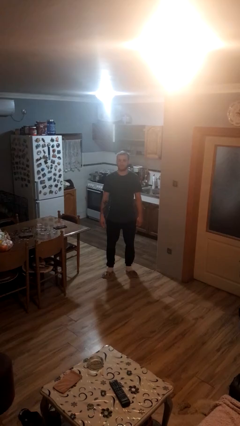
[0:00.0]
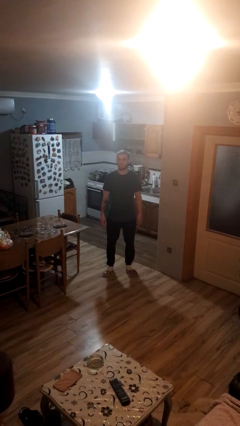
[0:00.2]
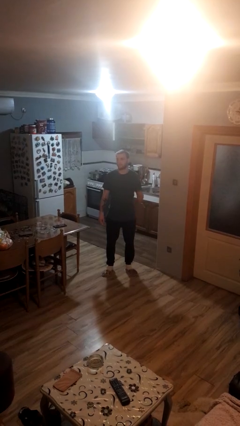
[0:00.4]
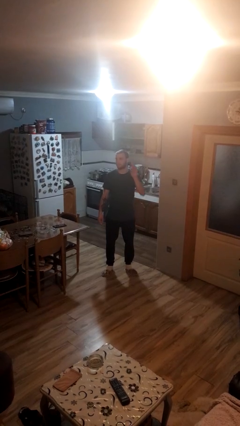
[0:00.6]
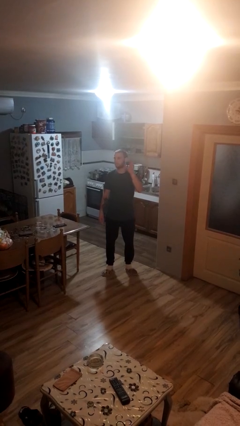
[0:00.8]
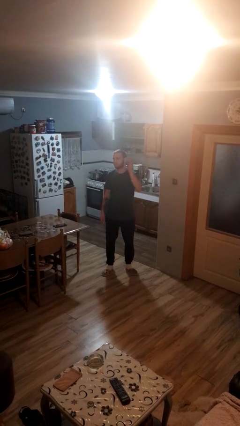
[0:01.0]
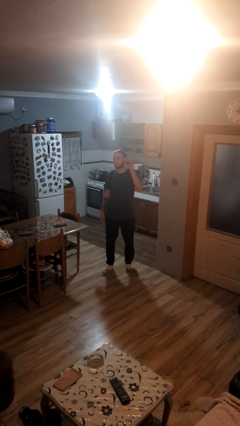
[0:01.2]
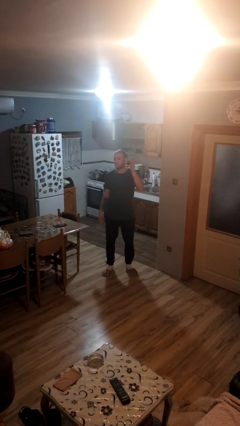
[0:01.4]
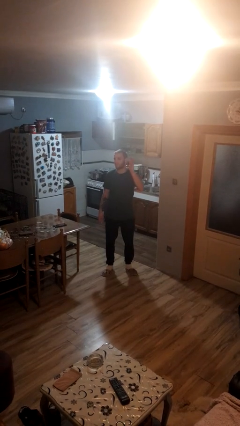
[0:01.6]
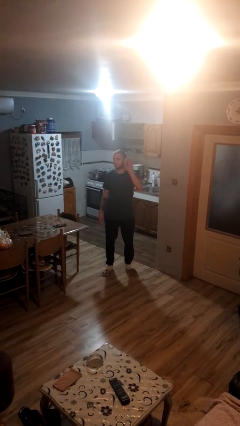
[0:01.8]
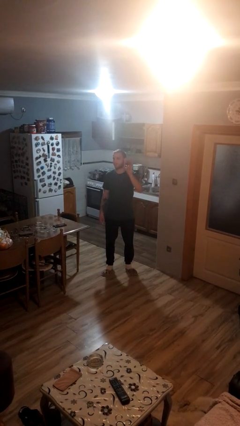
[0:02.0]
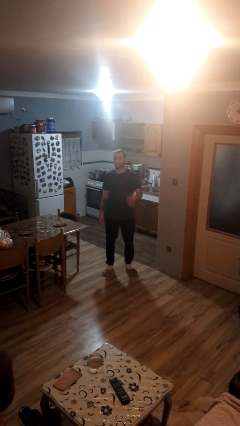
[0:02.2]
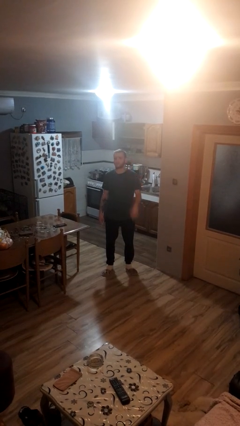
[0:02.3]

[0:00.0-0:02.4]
person waves at person

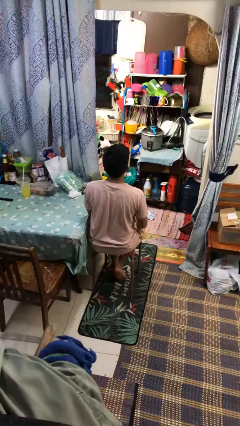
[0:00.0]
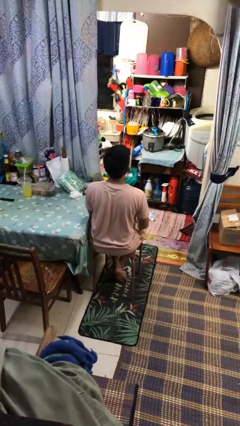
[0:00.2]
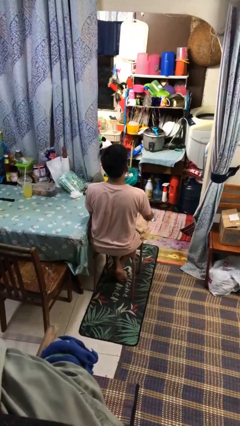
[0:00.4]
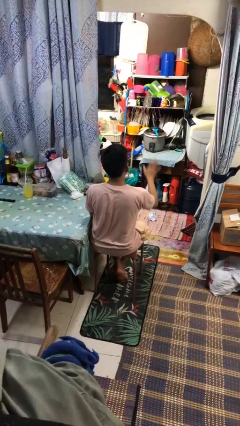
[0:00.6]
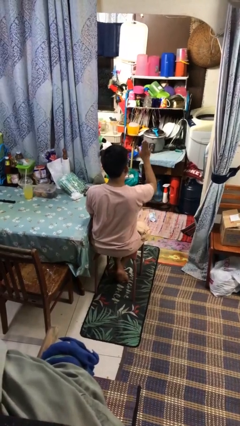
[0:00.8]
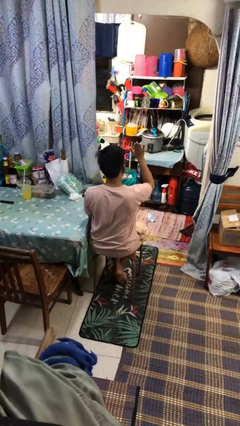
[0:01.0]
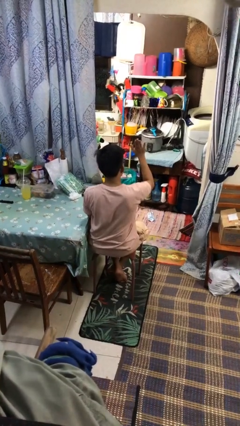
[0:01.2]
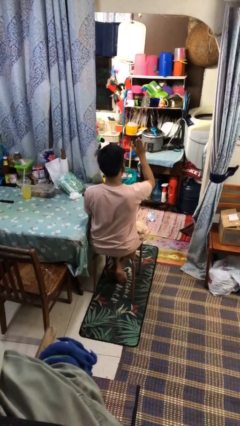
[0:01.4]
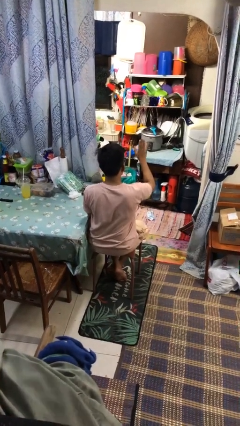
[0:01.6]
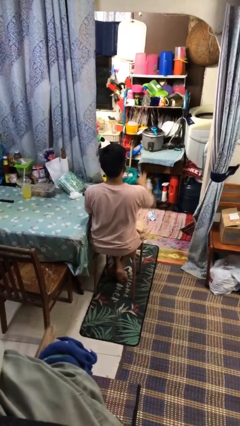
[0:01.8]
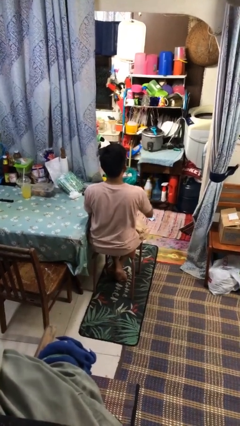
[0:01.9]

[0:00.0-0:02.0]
person gestures stop

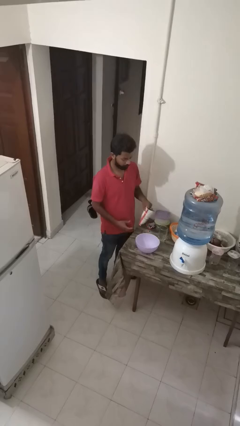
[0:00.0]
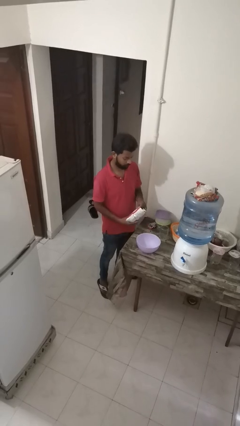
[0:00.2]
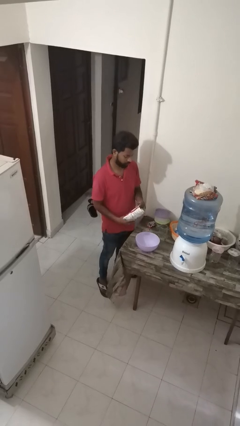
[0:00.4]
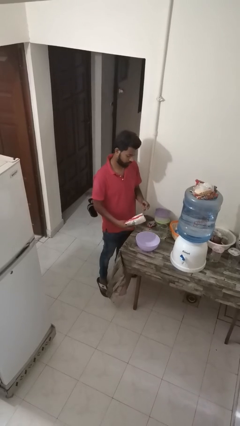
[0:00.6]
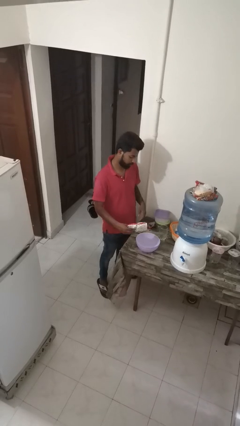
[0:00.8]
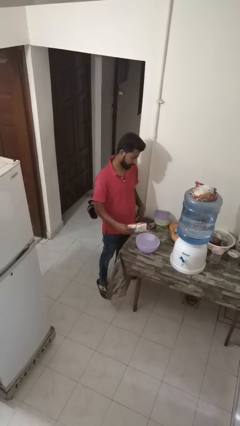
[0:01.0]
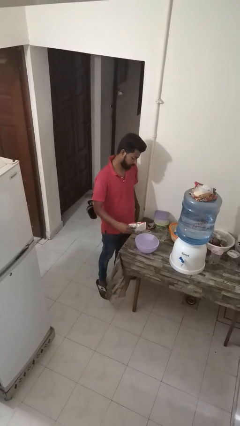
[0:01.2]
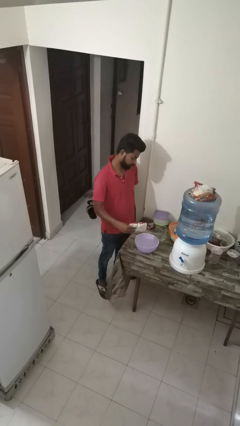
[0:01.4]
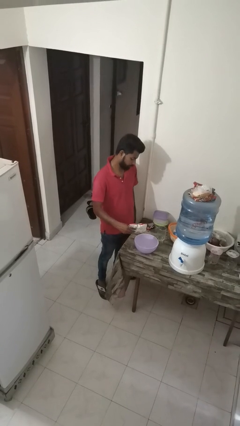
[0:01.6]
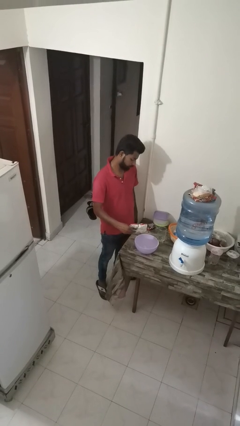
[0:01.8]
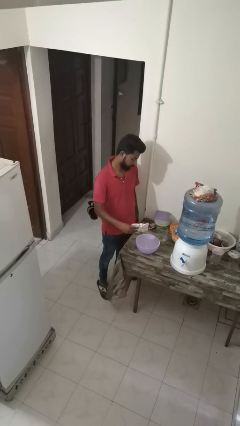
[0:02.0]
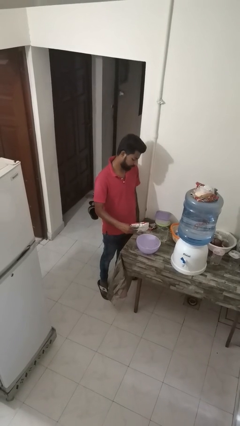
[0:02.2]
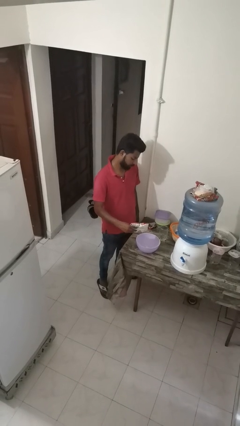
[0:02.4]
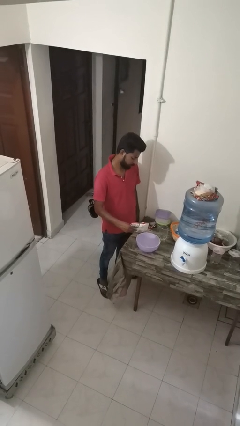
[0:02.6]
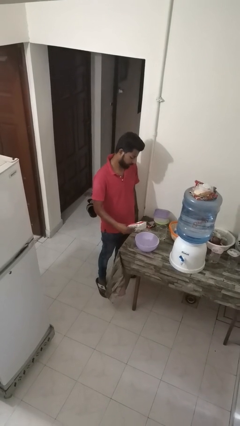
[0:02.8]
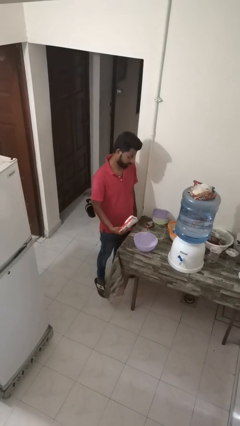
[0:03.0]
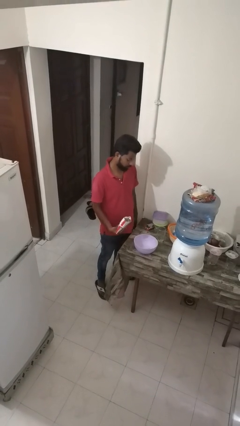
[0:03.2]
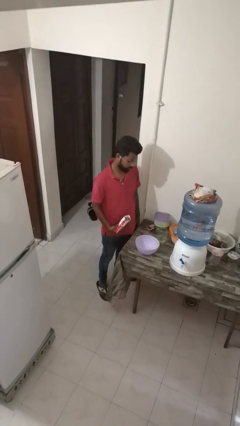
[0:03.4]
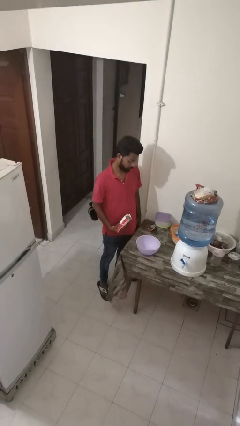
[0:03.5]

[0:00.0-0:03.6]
person pours into bowl

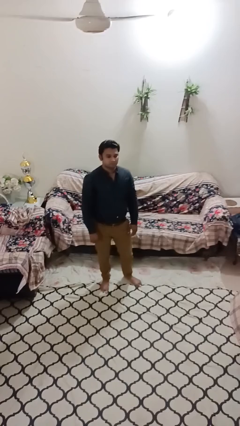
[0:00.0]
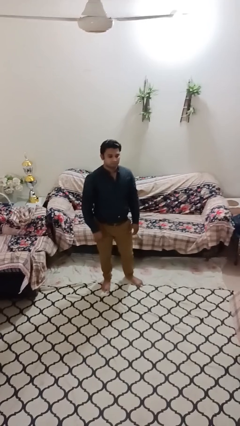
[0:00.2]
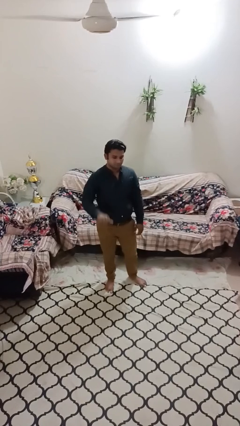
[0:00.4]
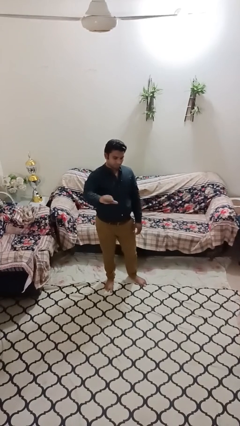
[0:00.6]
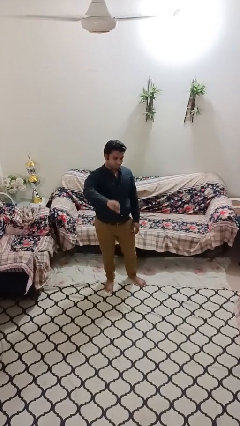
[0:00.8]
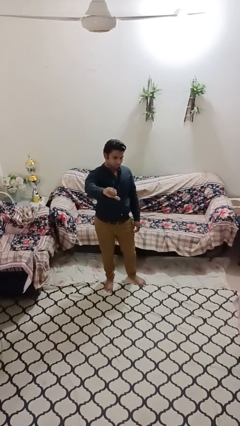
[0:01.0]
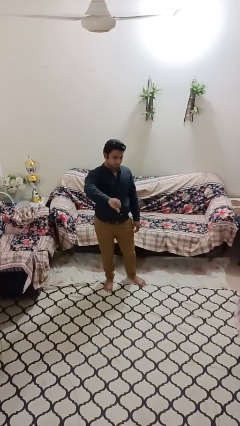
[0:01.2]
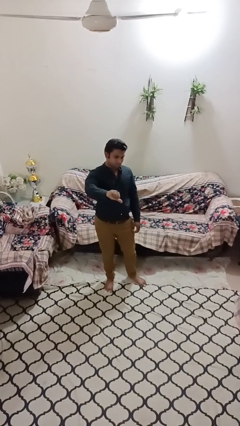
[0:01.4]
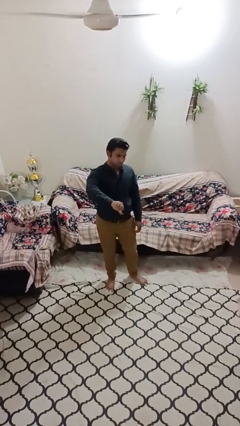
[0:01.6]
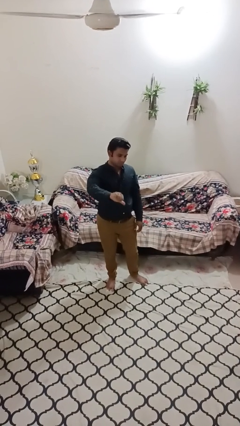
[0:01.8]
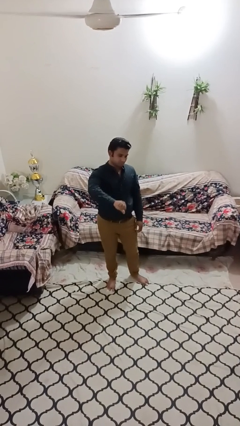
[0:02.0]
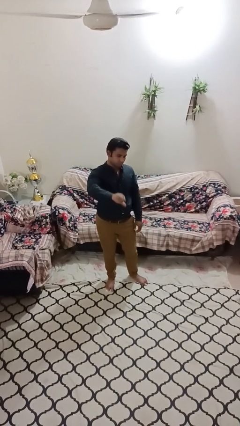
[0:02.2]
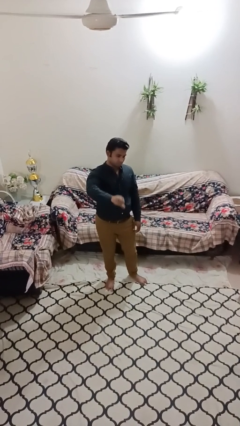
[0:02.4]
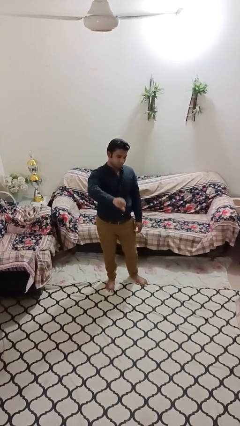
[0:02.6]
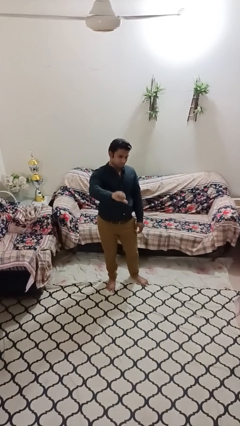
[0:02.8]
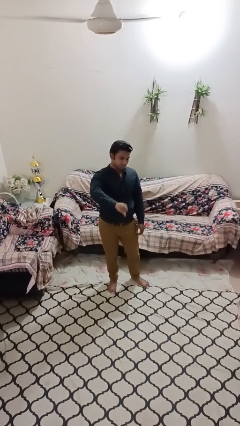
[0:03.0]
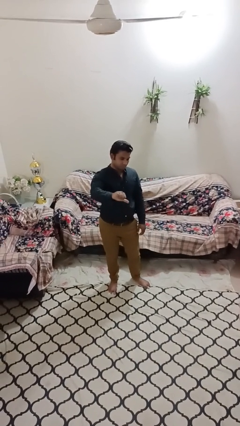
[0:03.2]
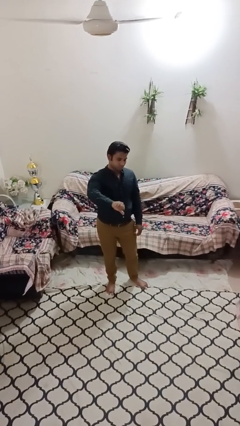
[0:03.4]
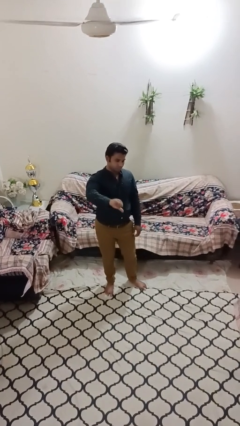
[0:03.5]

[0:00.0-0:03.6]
person gestures thumbs down

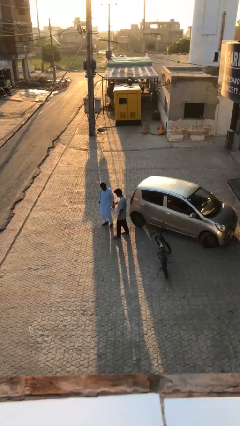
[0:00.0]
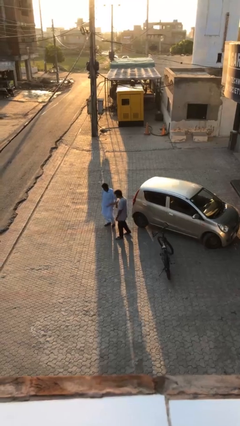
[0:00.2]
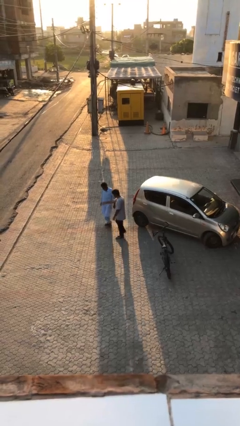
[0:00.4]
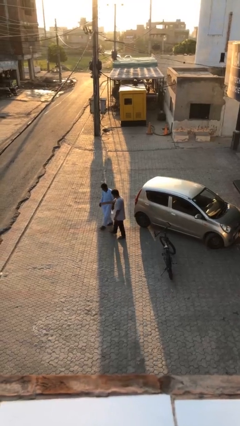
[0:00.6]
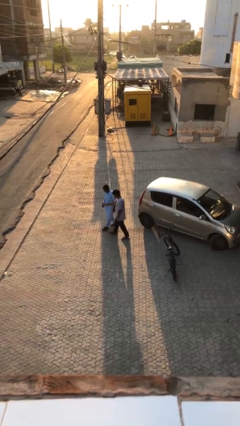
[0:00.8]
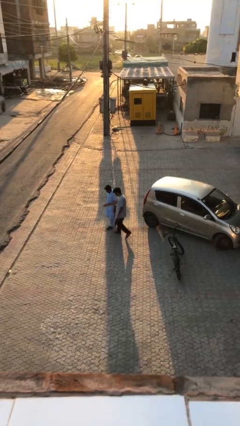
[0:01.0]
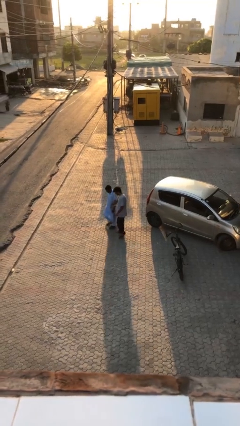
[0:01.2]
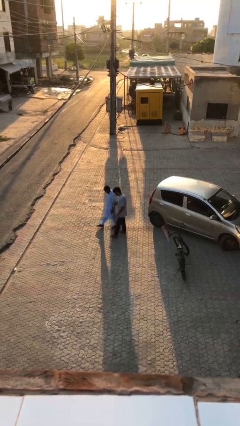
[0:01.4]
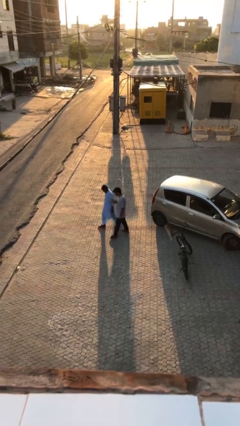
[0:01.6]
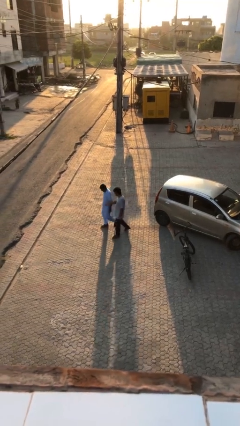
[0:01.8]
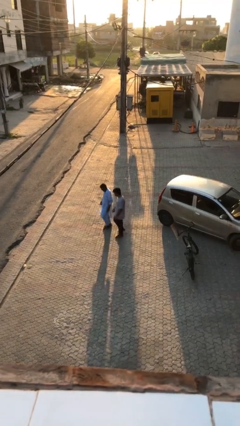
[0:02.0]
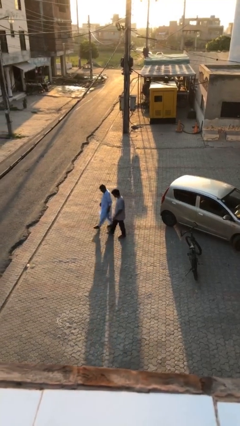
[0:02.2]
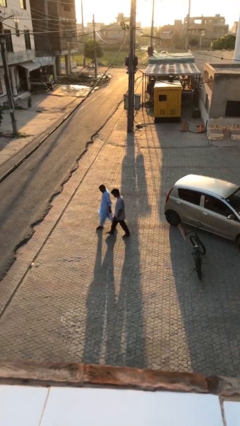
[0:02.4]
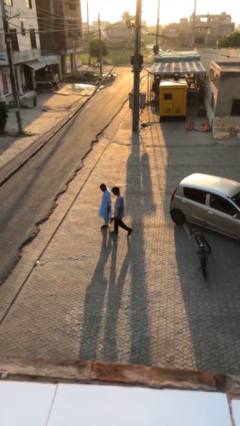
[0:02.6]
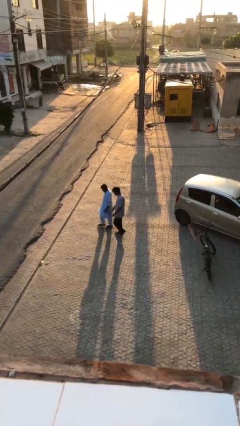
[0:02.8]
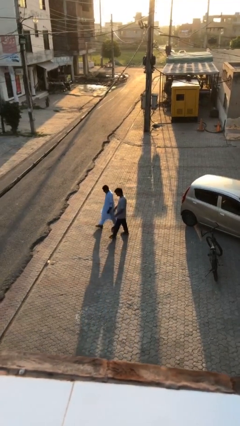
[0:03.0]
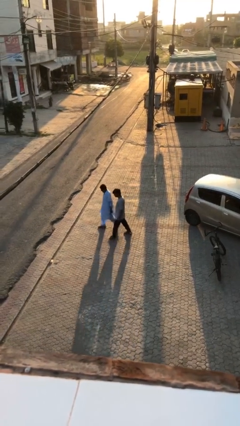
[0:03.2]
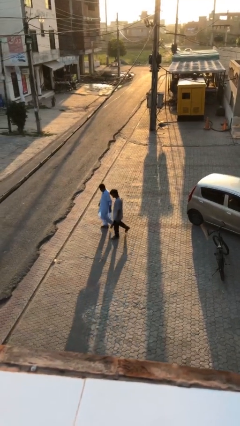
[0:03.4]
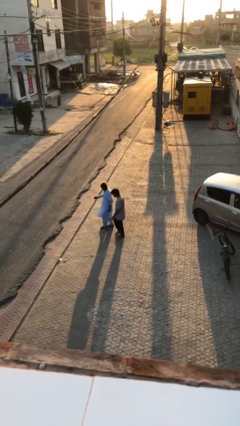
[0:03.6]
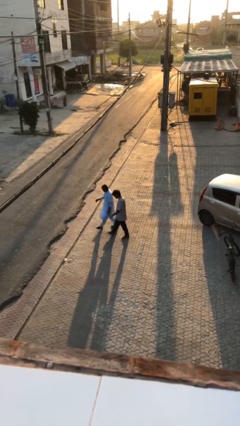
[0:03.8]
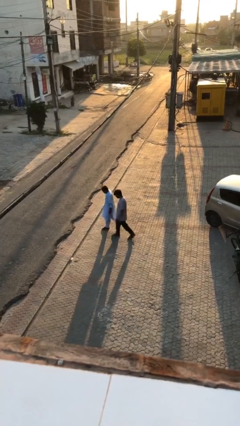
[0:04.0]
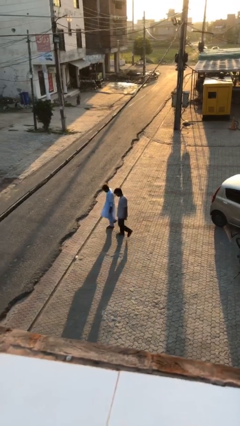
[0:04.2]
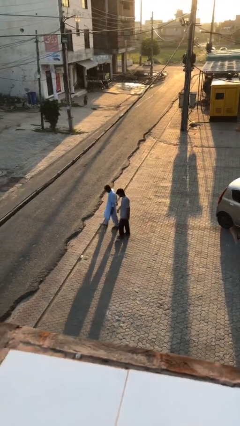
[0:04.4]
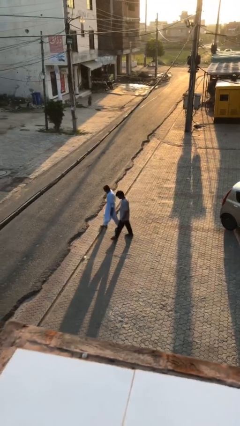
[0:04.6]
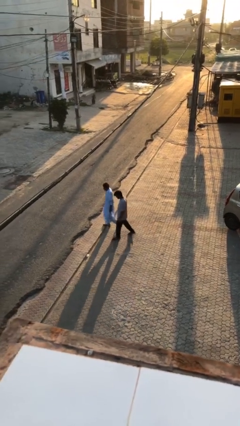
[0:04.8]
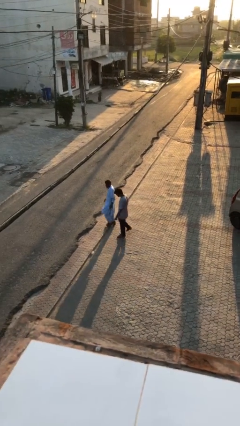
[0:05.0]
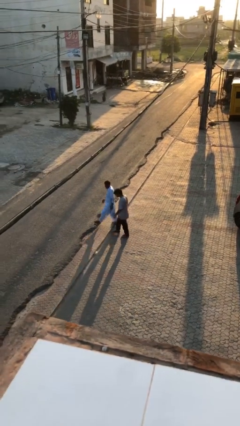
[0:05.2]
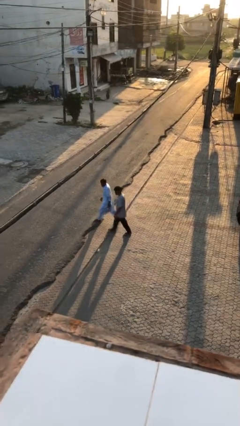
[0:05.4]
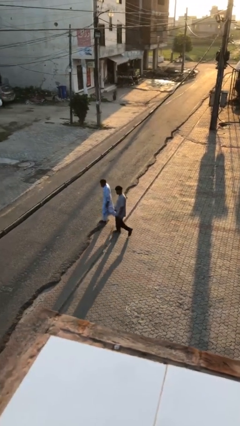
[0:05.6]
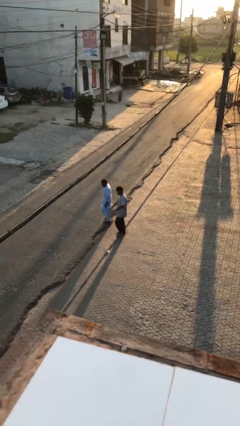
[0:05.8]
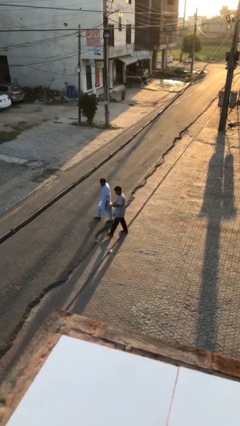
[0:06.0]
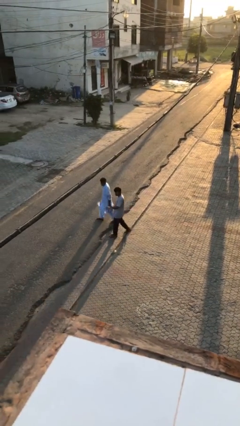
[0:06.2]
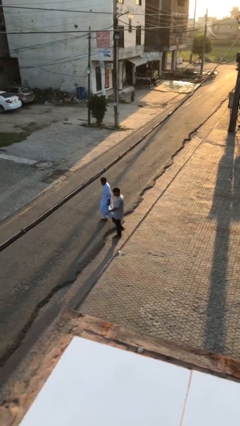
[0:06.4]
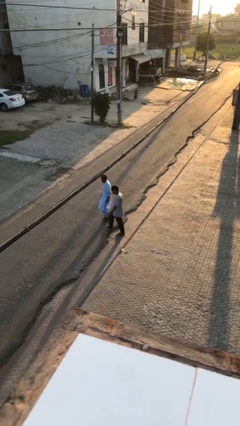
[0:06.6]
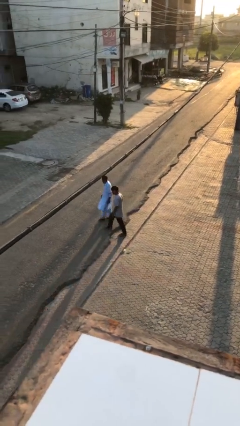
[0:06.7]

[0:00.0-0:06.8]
person talks to person
